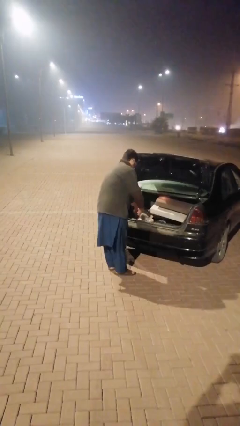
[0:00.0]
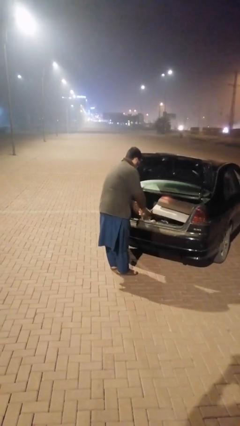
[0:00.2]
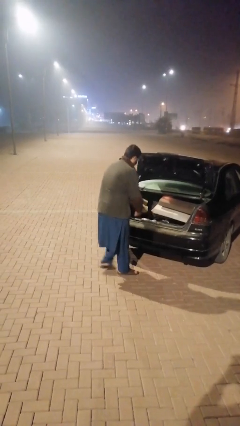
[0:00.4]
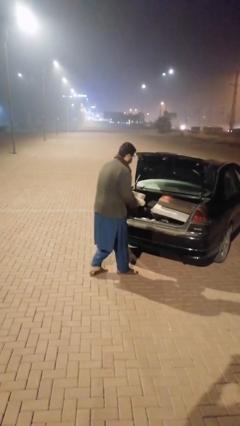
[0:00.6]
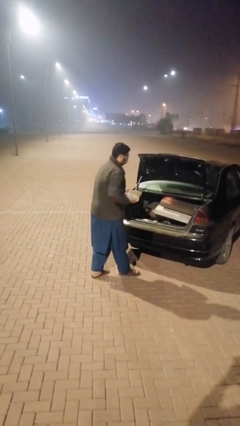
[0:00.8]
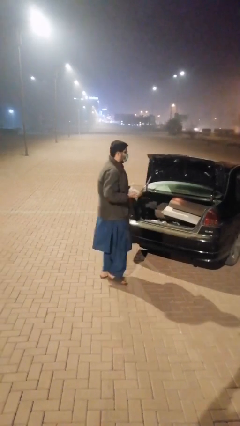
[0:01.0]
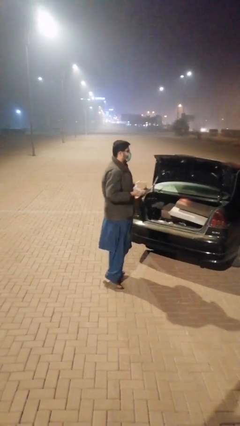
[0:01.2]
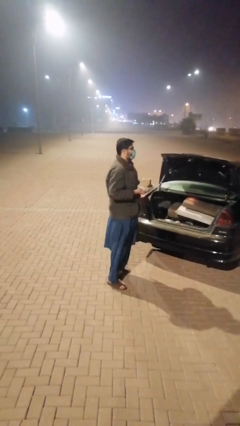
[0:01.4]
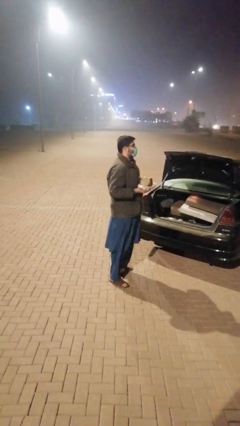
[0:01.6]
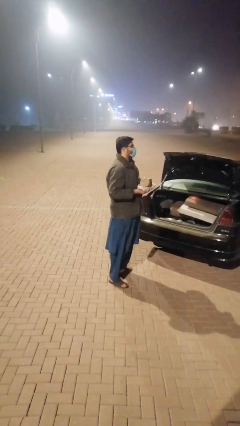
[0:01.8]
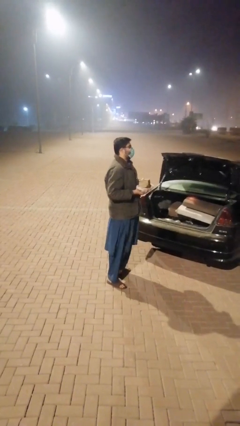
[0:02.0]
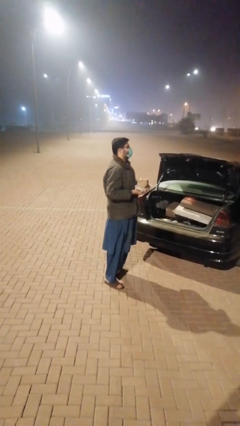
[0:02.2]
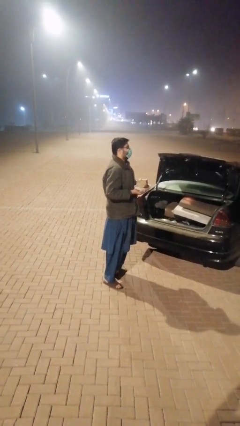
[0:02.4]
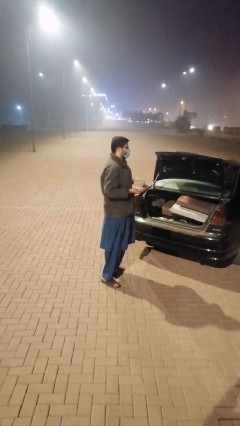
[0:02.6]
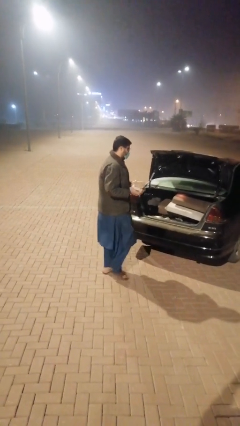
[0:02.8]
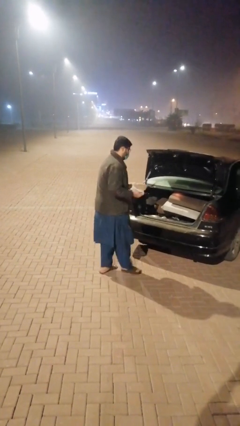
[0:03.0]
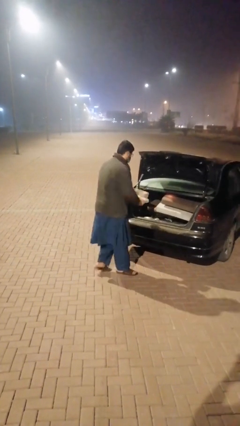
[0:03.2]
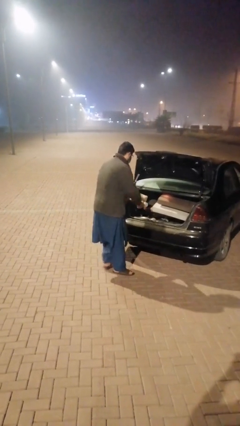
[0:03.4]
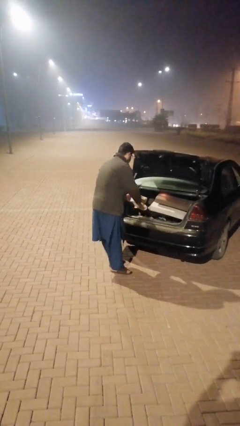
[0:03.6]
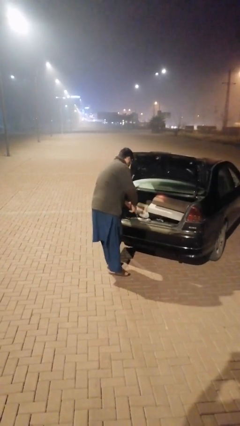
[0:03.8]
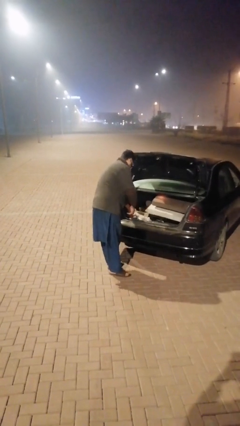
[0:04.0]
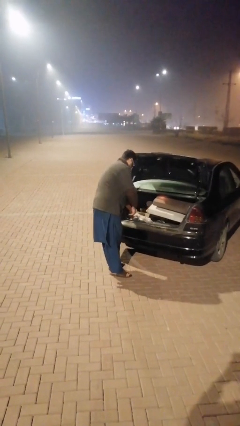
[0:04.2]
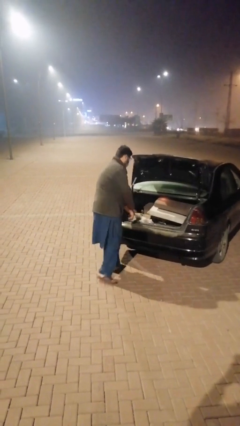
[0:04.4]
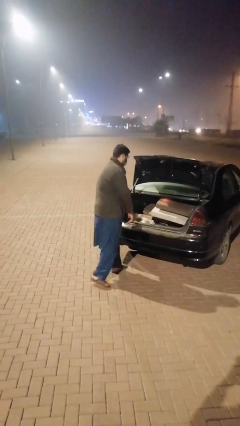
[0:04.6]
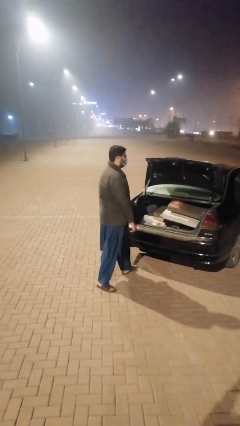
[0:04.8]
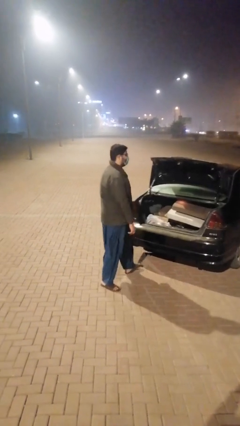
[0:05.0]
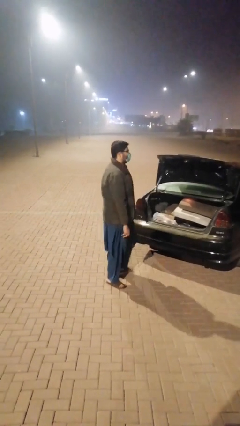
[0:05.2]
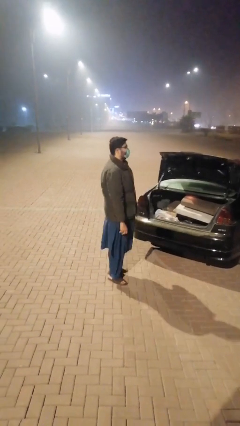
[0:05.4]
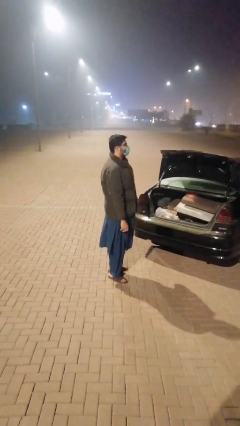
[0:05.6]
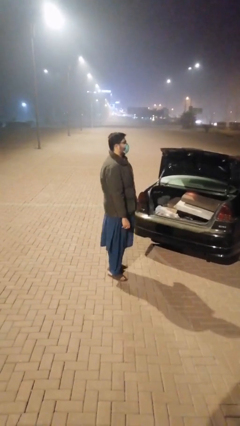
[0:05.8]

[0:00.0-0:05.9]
person unloads car

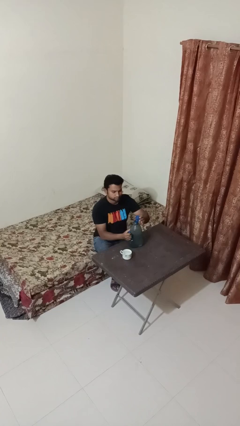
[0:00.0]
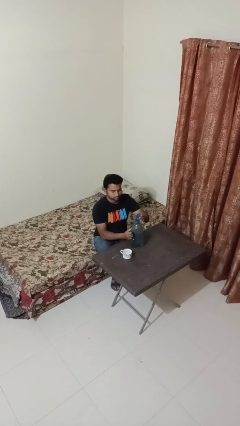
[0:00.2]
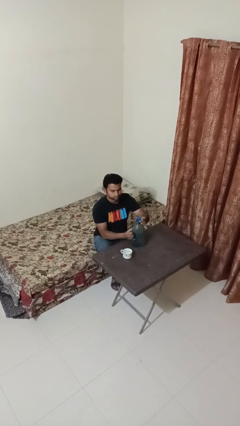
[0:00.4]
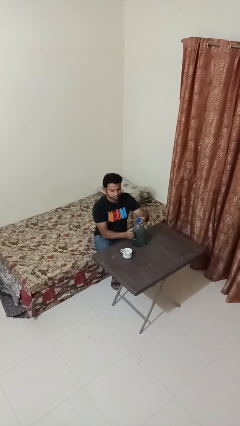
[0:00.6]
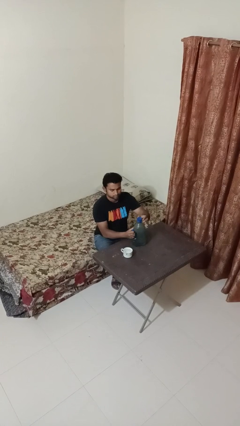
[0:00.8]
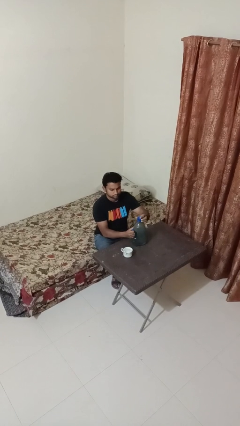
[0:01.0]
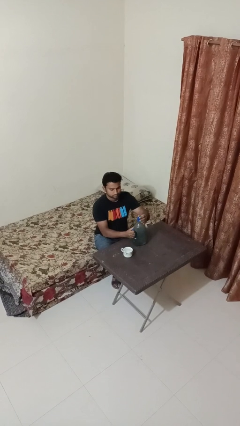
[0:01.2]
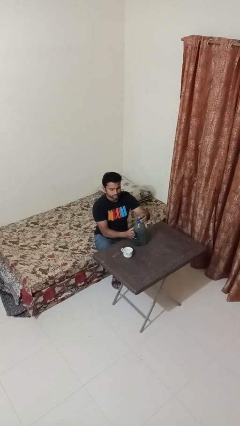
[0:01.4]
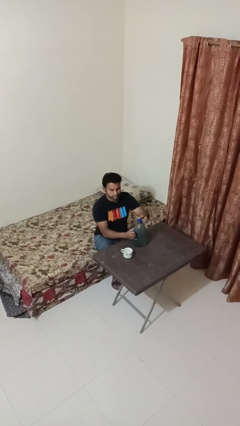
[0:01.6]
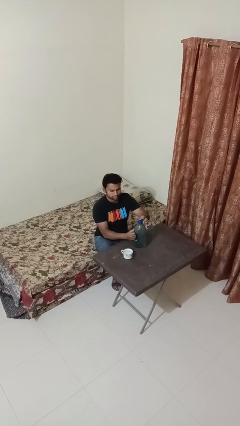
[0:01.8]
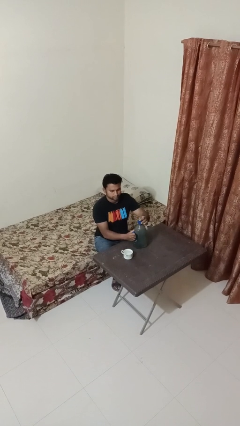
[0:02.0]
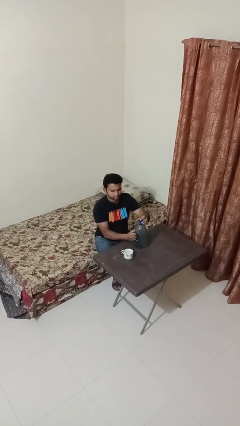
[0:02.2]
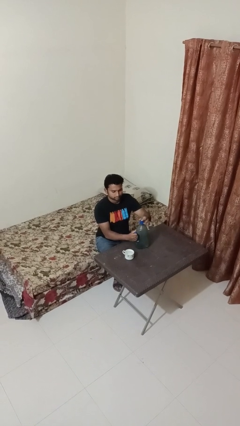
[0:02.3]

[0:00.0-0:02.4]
person screws lid to bottle

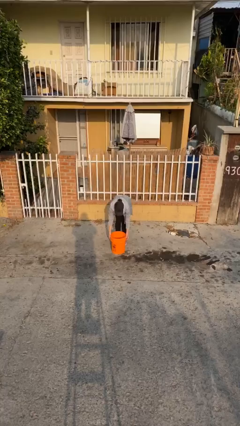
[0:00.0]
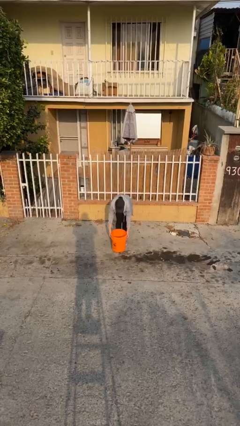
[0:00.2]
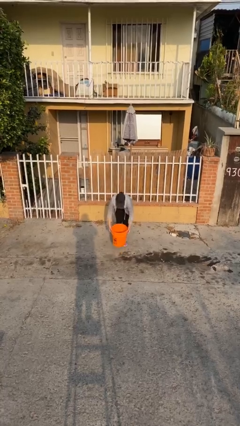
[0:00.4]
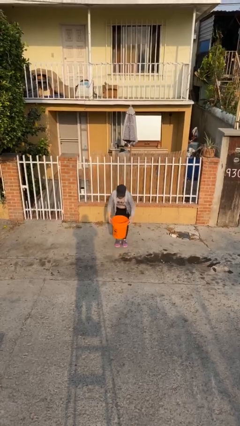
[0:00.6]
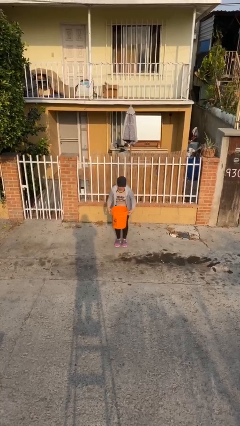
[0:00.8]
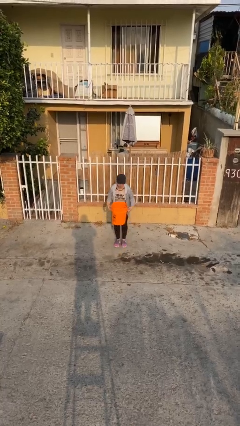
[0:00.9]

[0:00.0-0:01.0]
person picks up object from floor

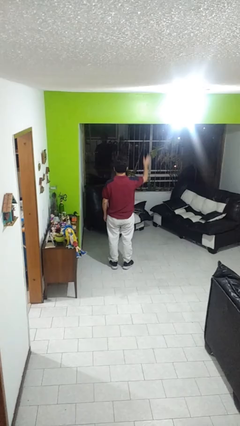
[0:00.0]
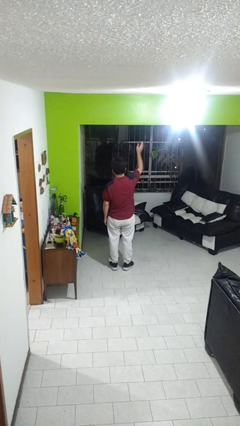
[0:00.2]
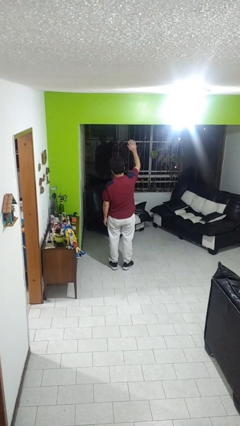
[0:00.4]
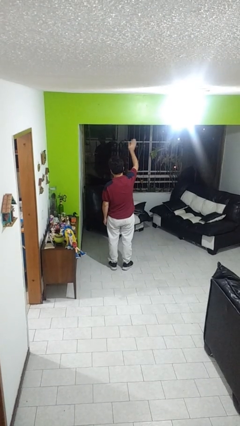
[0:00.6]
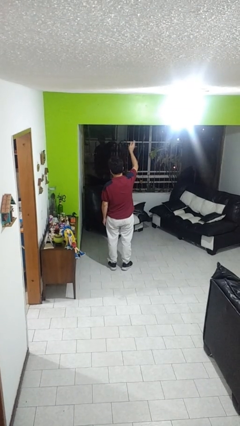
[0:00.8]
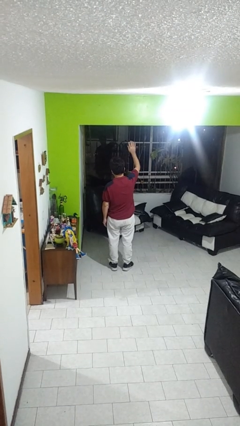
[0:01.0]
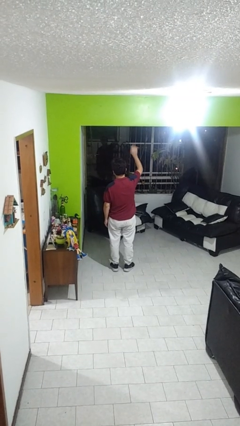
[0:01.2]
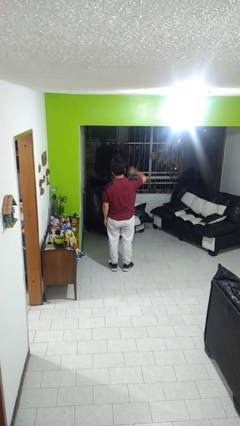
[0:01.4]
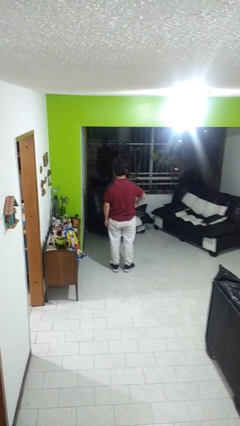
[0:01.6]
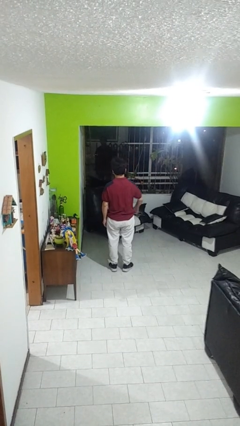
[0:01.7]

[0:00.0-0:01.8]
person waves at person

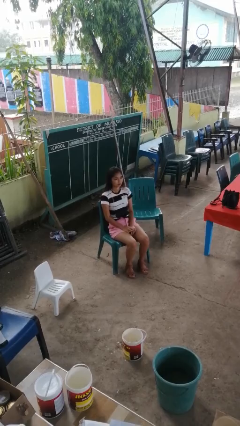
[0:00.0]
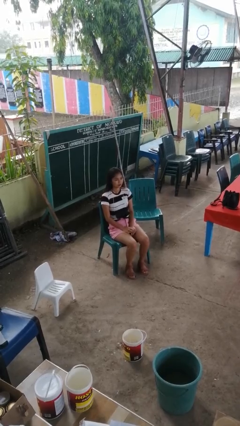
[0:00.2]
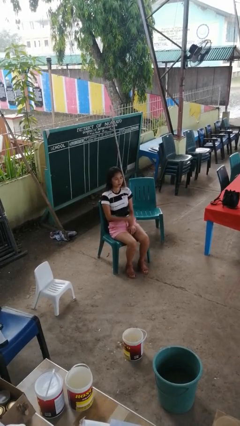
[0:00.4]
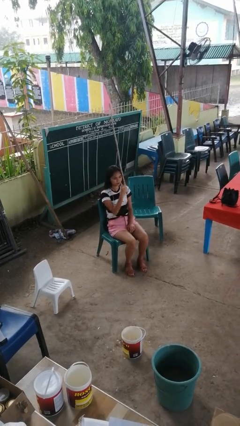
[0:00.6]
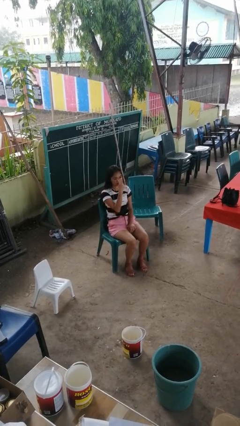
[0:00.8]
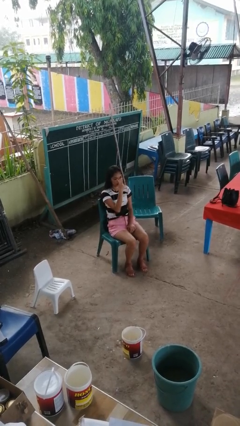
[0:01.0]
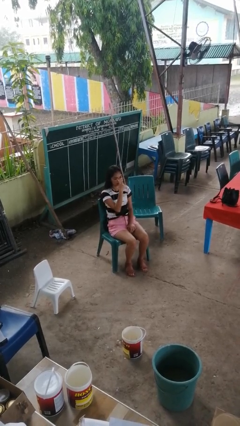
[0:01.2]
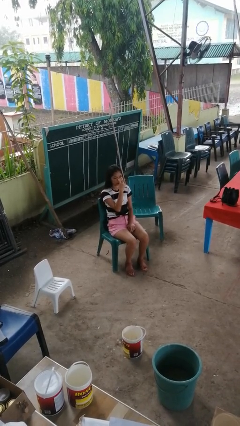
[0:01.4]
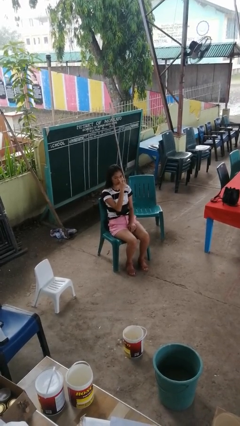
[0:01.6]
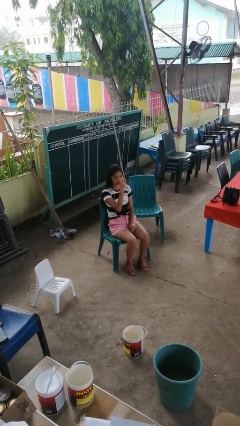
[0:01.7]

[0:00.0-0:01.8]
person gestures watch closely

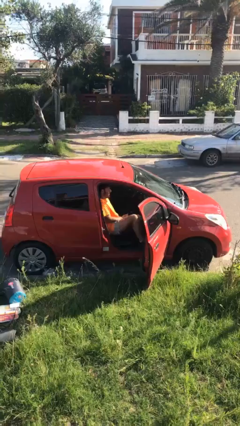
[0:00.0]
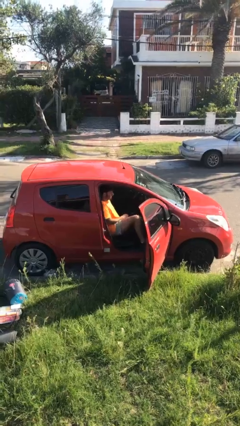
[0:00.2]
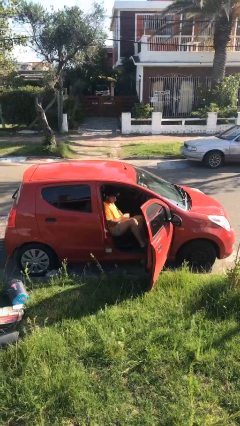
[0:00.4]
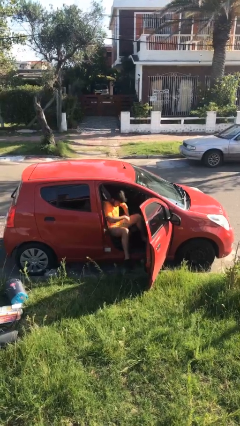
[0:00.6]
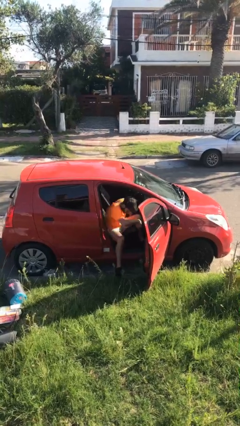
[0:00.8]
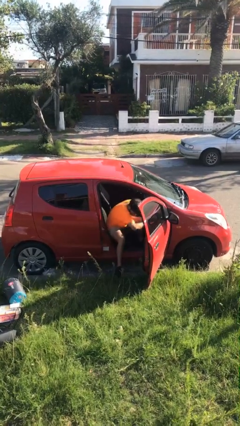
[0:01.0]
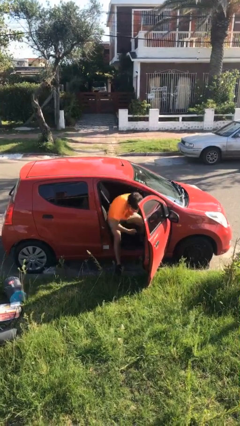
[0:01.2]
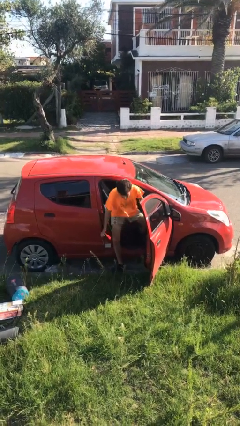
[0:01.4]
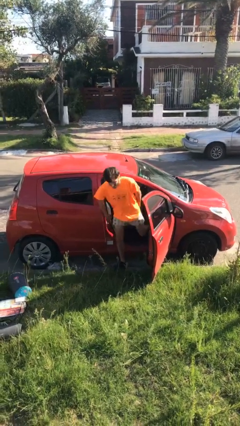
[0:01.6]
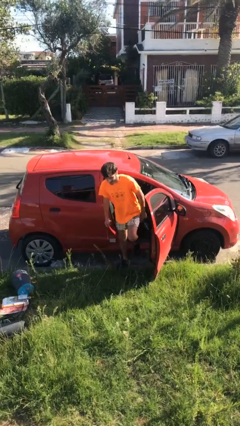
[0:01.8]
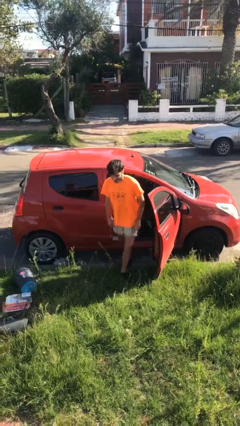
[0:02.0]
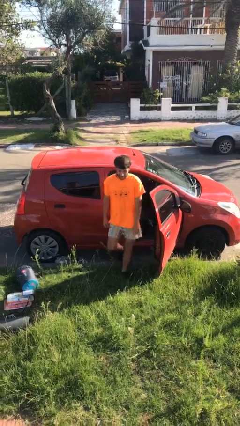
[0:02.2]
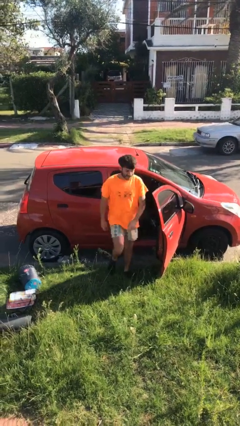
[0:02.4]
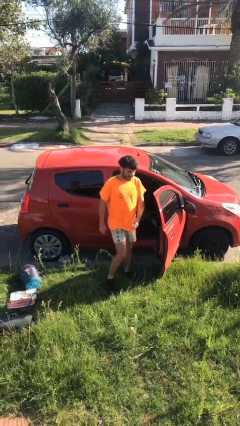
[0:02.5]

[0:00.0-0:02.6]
person exits car

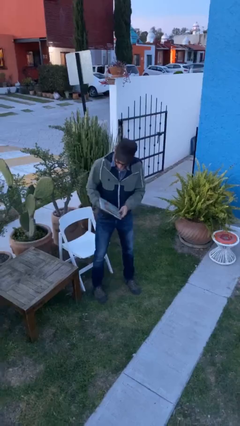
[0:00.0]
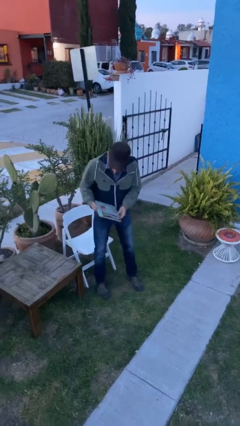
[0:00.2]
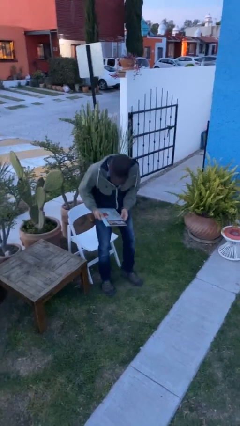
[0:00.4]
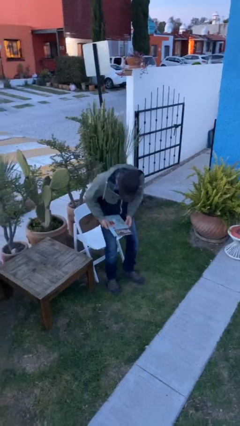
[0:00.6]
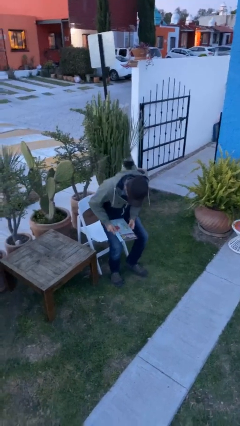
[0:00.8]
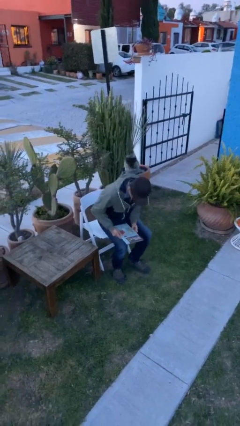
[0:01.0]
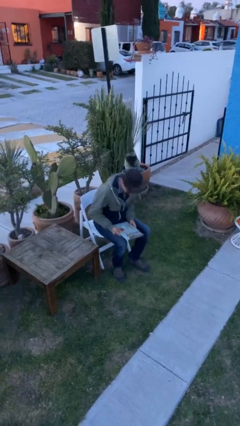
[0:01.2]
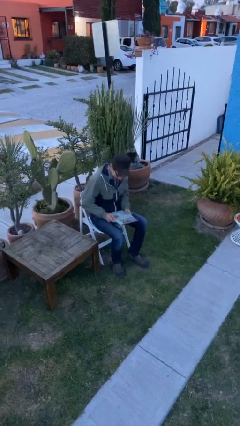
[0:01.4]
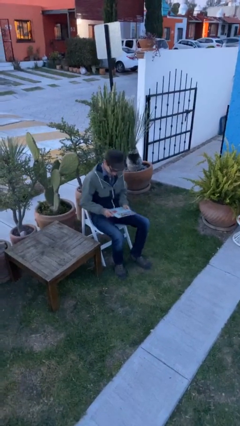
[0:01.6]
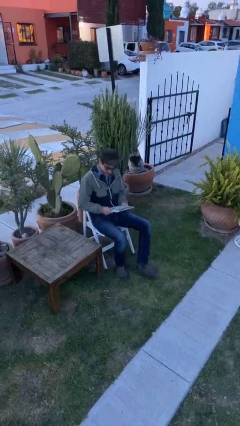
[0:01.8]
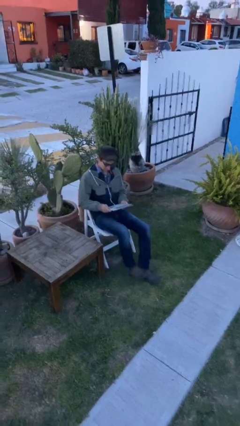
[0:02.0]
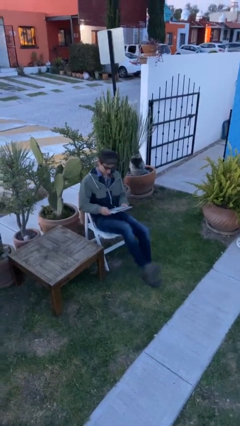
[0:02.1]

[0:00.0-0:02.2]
person sits down
